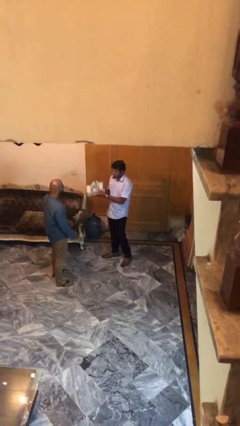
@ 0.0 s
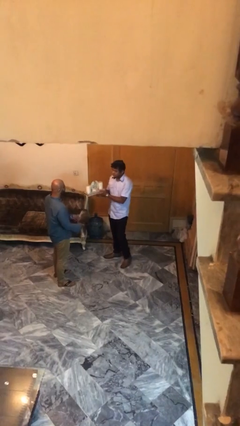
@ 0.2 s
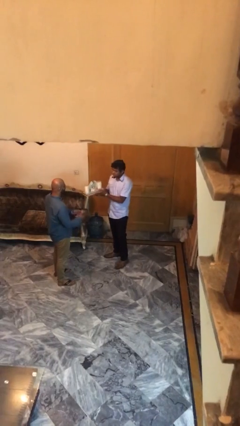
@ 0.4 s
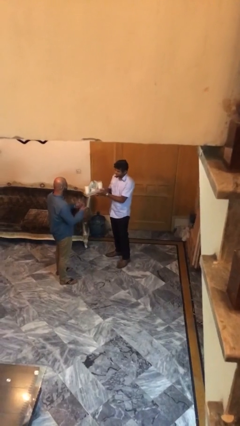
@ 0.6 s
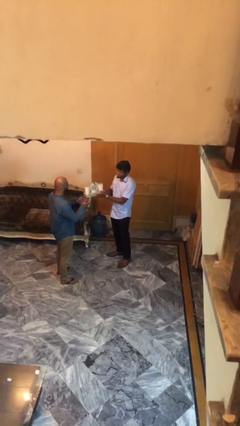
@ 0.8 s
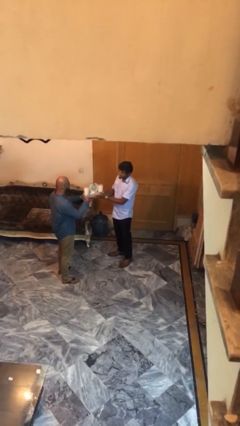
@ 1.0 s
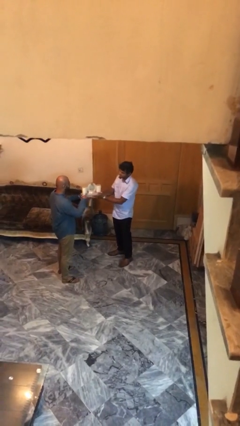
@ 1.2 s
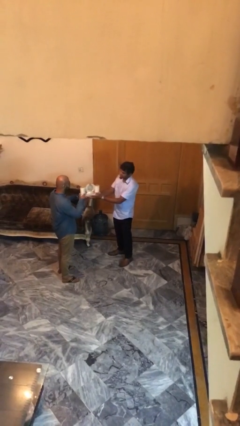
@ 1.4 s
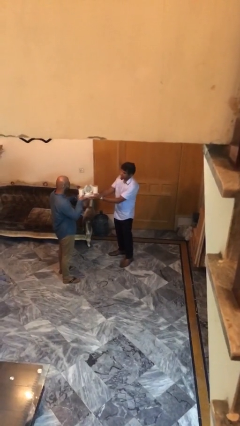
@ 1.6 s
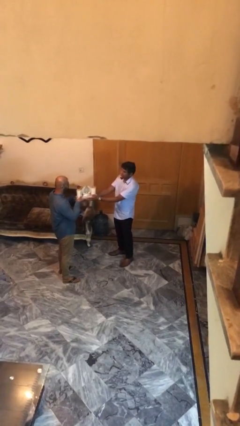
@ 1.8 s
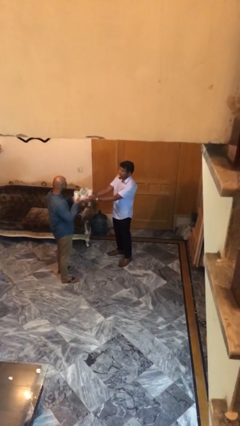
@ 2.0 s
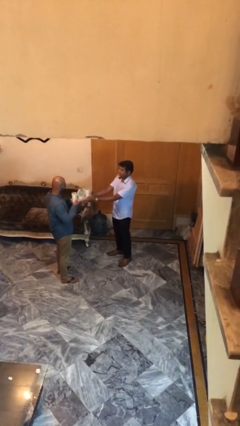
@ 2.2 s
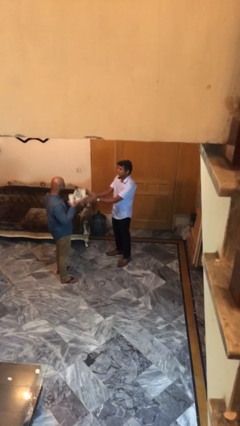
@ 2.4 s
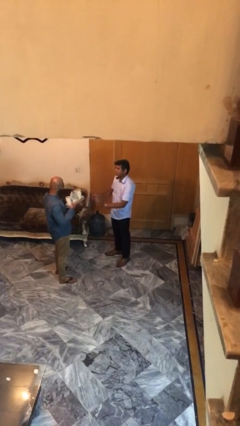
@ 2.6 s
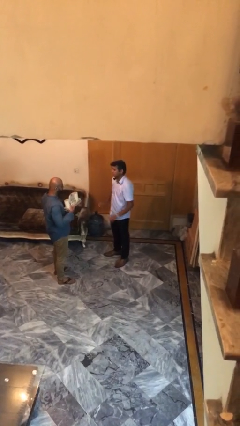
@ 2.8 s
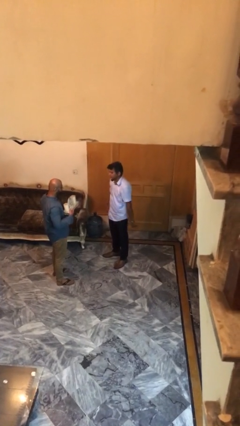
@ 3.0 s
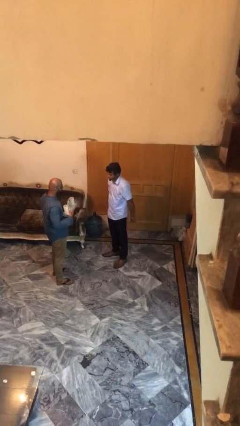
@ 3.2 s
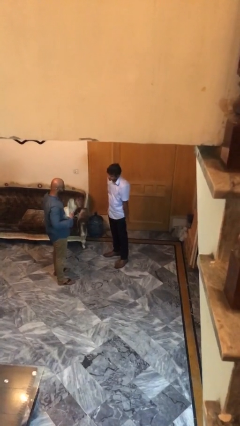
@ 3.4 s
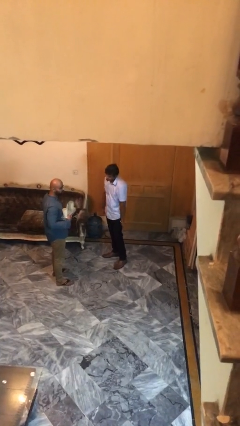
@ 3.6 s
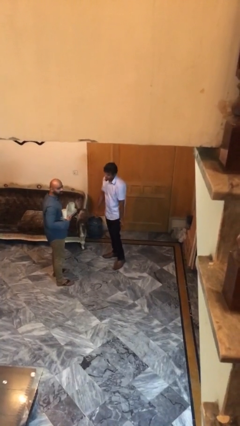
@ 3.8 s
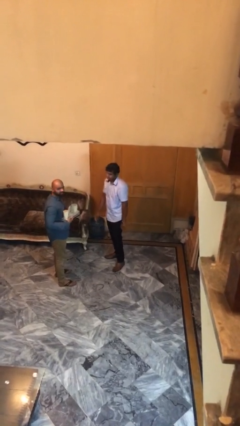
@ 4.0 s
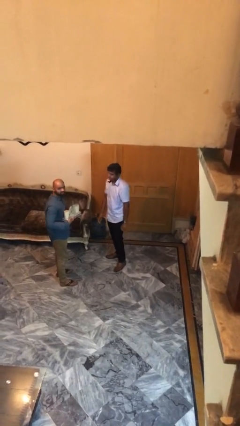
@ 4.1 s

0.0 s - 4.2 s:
person transfers object to person

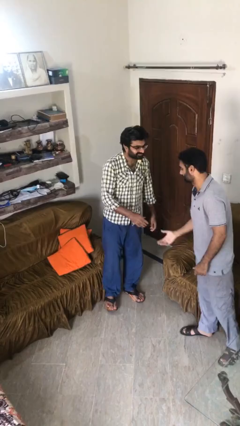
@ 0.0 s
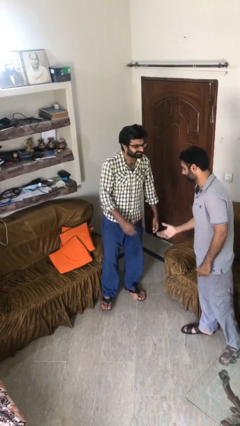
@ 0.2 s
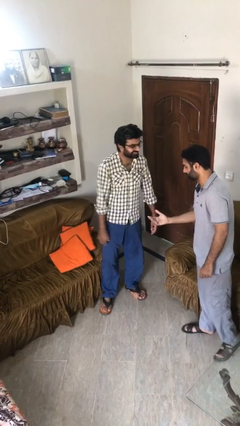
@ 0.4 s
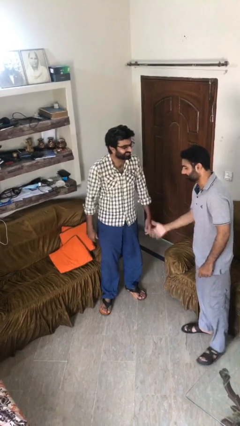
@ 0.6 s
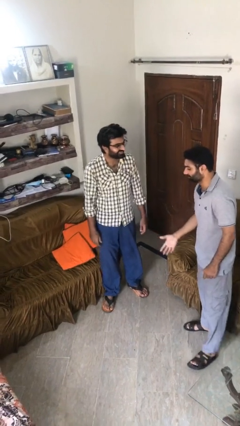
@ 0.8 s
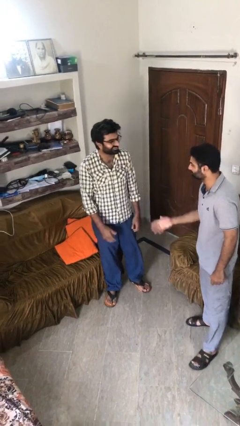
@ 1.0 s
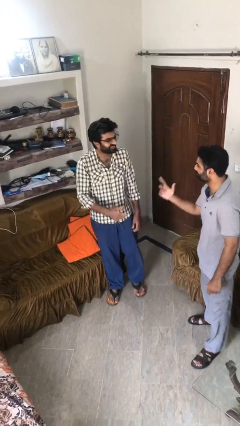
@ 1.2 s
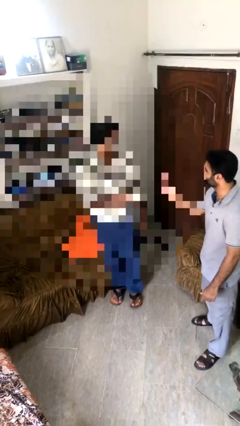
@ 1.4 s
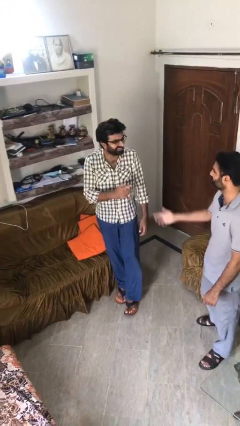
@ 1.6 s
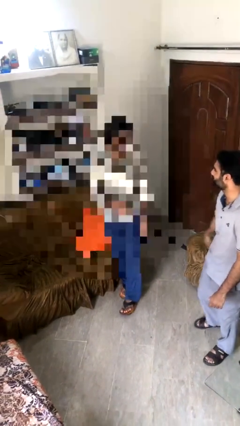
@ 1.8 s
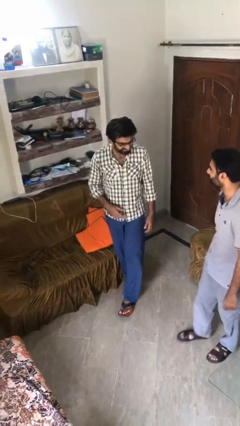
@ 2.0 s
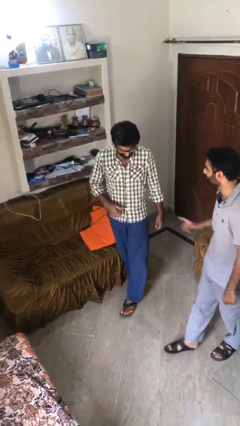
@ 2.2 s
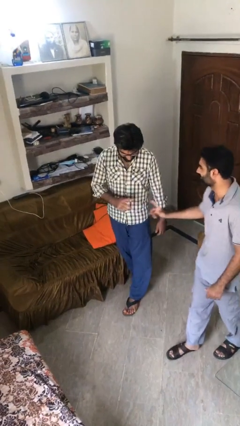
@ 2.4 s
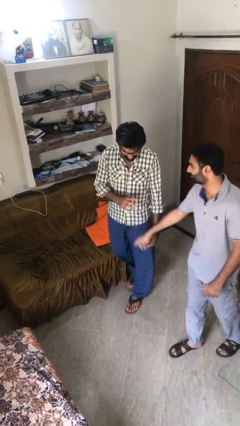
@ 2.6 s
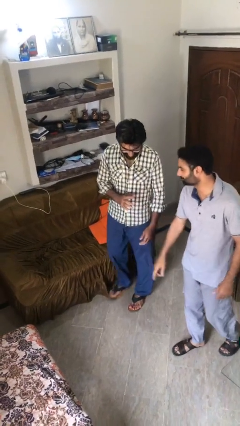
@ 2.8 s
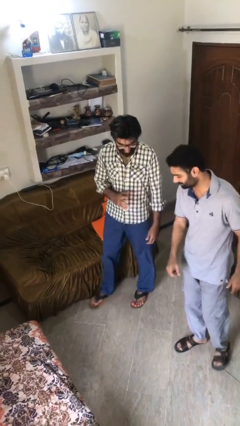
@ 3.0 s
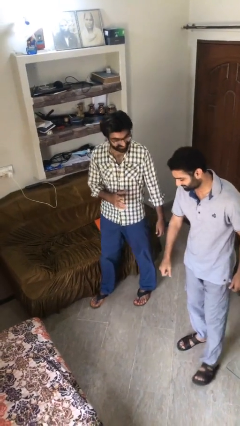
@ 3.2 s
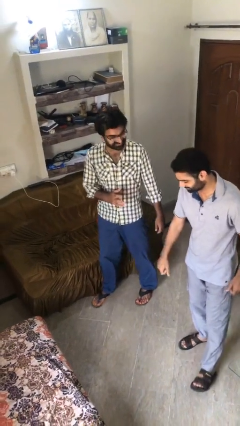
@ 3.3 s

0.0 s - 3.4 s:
person talks to person

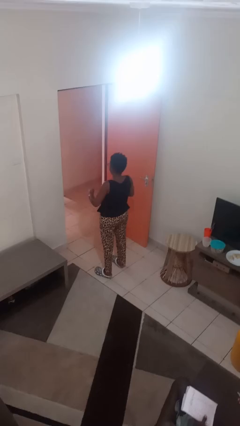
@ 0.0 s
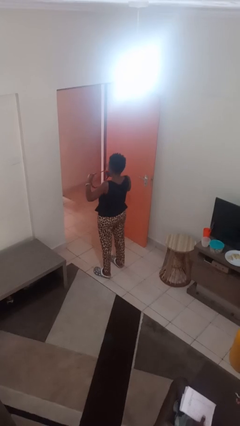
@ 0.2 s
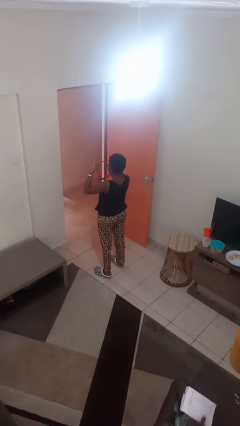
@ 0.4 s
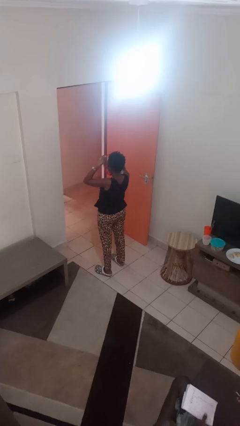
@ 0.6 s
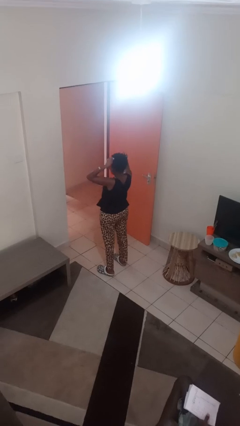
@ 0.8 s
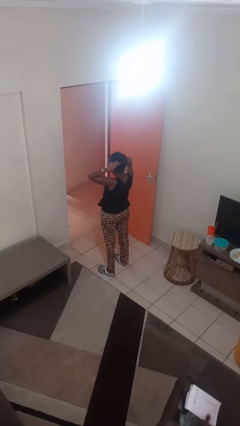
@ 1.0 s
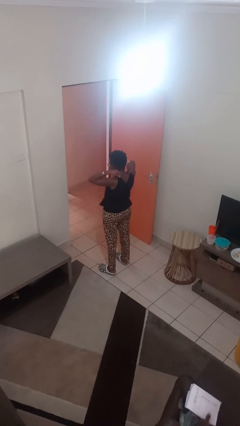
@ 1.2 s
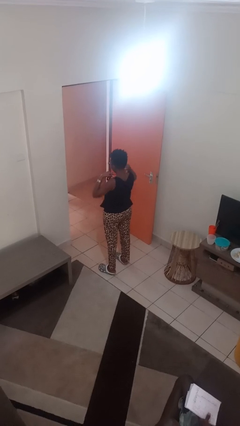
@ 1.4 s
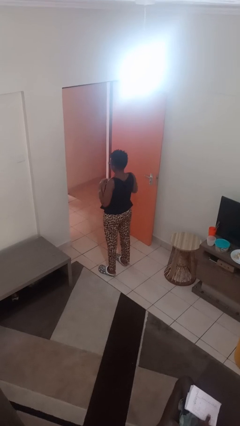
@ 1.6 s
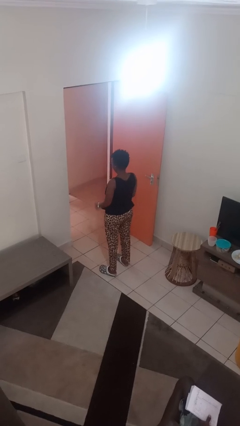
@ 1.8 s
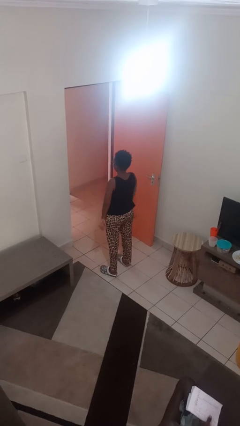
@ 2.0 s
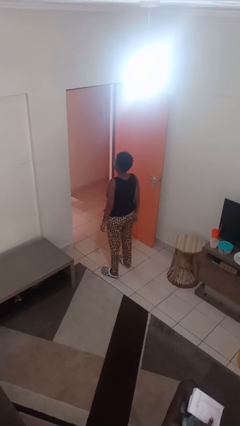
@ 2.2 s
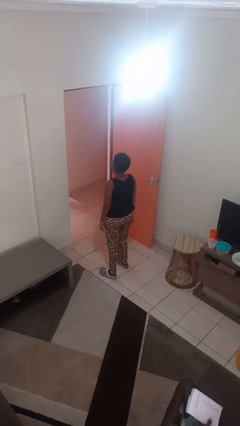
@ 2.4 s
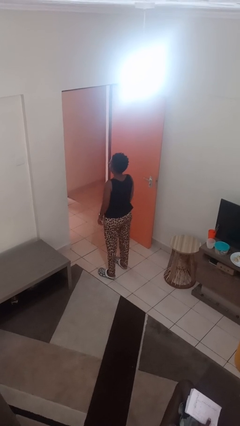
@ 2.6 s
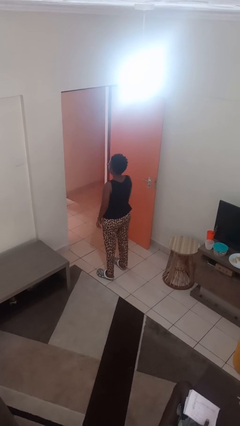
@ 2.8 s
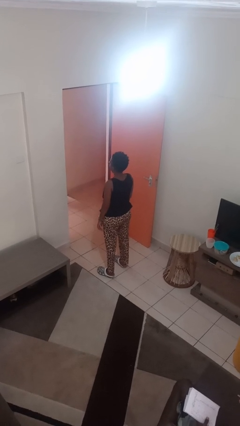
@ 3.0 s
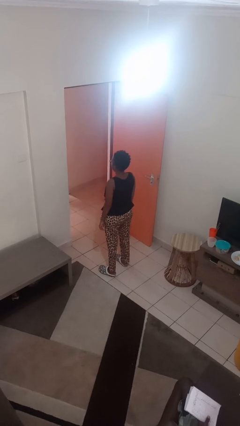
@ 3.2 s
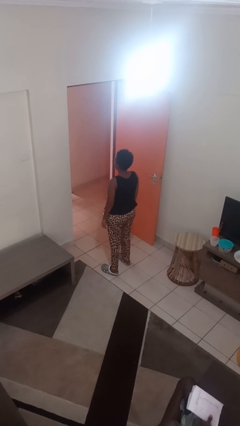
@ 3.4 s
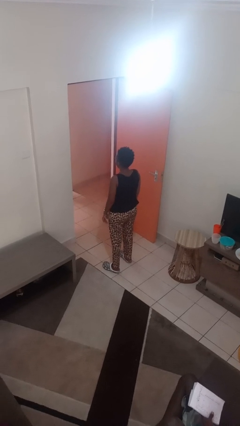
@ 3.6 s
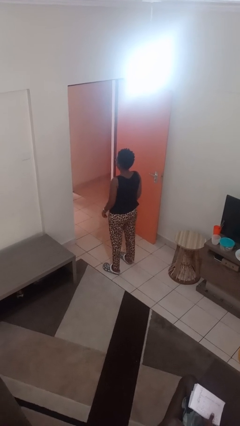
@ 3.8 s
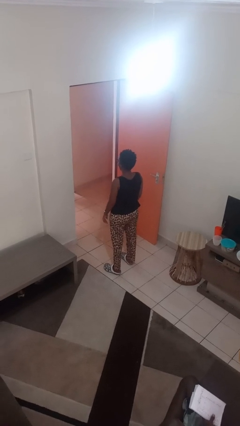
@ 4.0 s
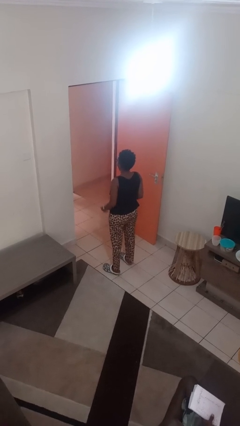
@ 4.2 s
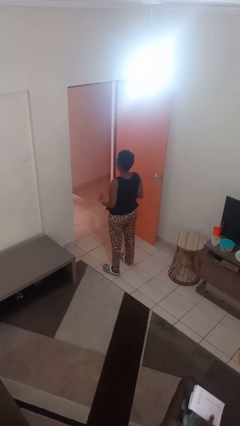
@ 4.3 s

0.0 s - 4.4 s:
person puts on necklace

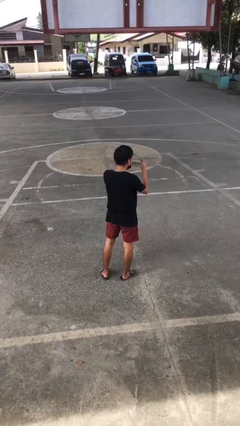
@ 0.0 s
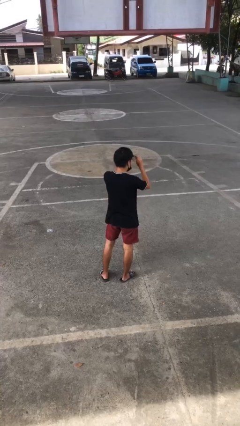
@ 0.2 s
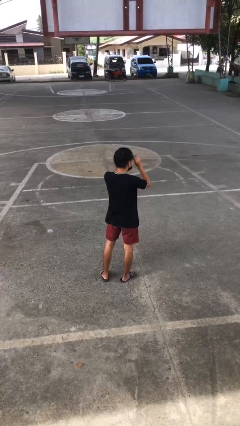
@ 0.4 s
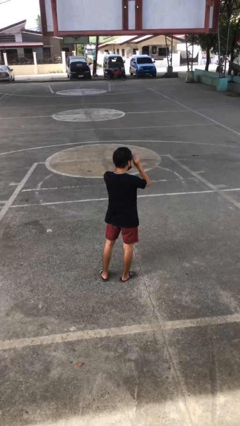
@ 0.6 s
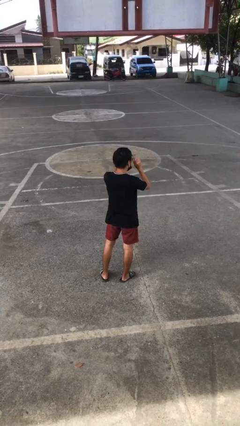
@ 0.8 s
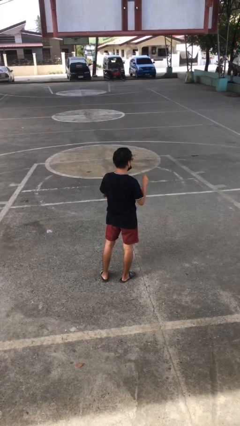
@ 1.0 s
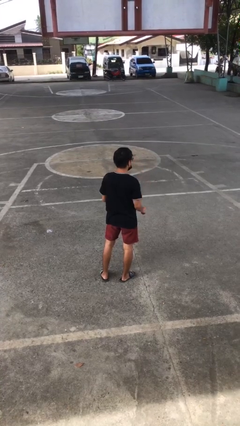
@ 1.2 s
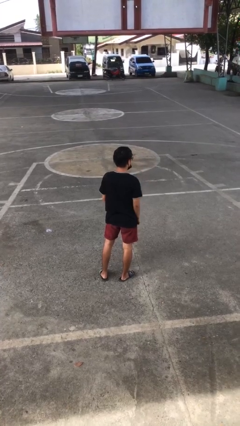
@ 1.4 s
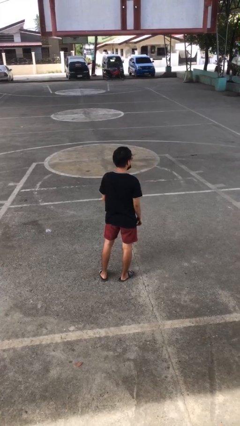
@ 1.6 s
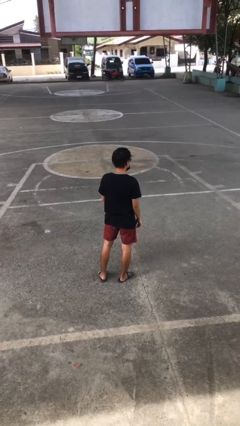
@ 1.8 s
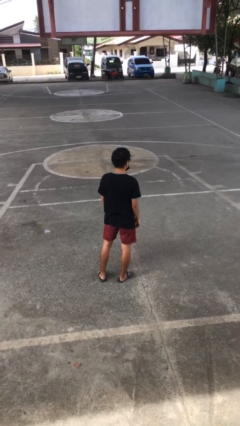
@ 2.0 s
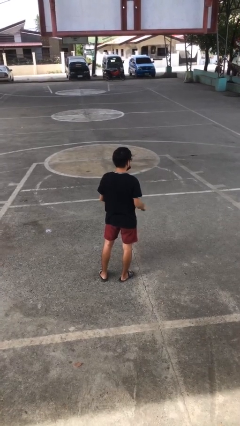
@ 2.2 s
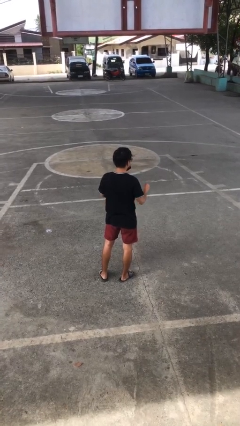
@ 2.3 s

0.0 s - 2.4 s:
person puts on glasses

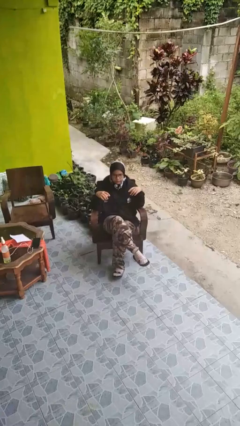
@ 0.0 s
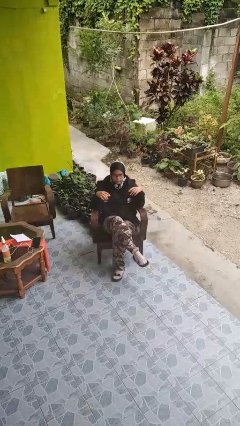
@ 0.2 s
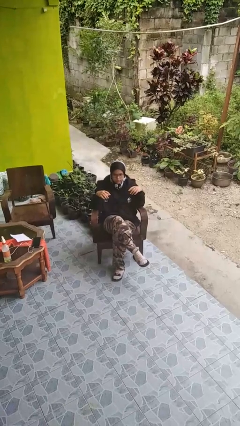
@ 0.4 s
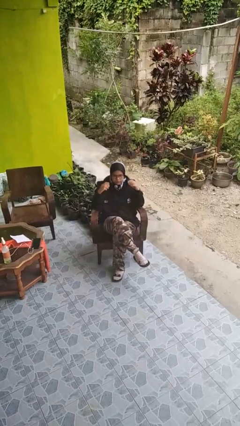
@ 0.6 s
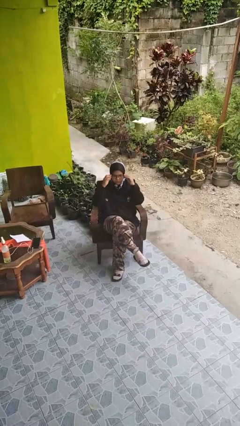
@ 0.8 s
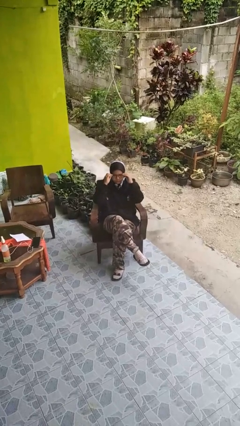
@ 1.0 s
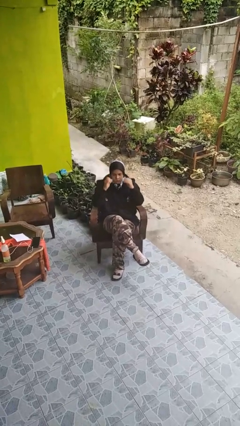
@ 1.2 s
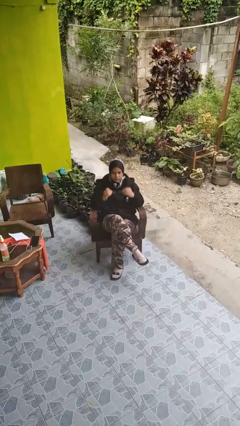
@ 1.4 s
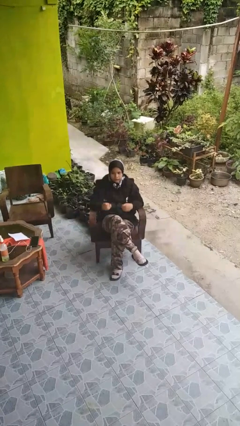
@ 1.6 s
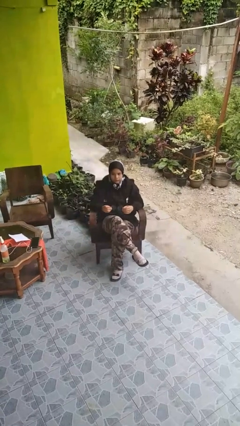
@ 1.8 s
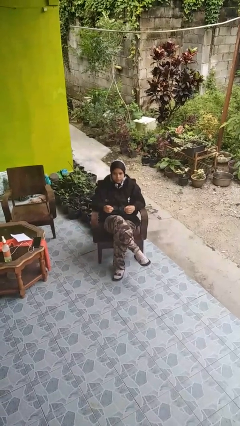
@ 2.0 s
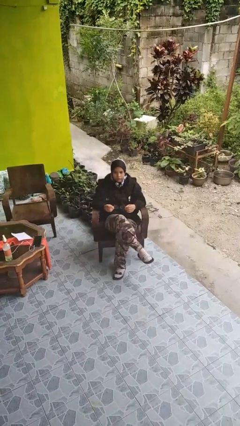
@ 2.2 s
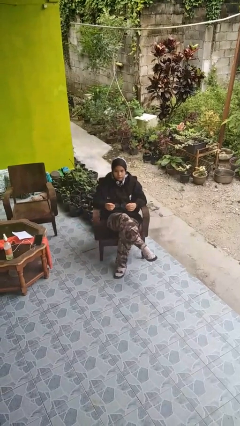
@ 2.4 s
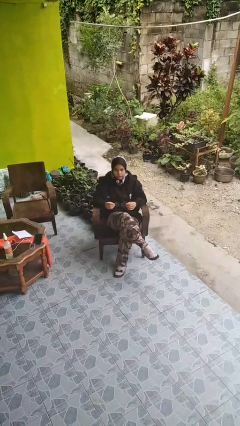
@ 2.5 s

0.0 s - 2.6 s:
person takes off glasses

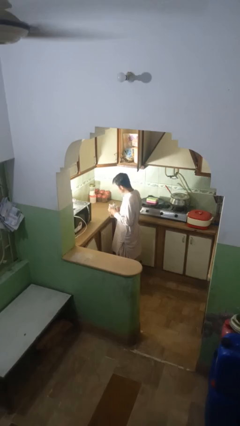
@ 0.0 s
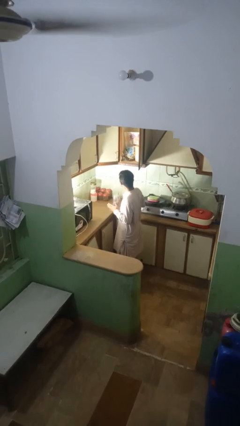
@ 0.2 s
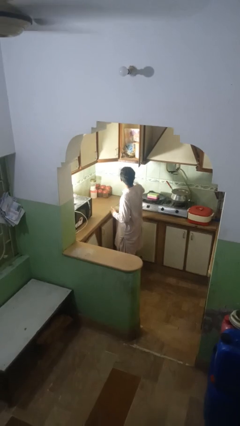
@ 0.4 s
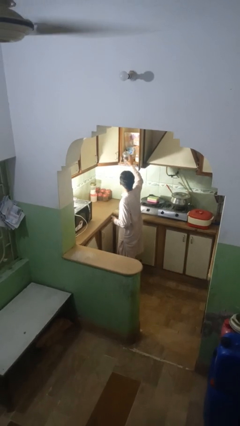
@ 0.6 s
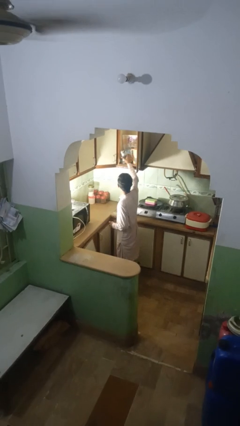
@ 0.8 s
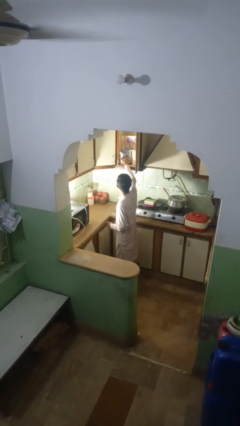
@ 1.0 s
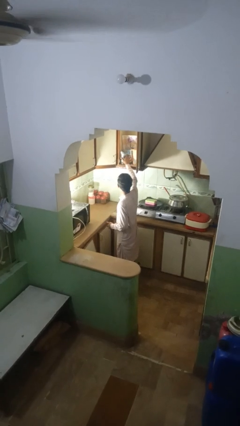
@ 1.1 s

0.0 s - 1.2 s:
person puts object into kitchen drawer
